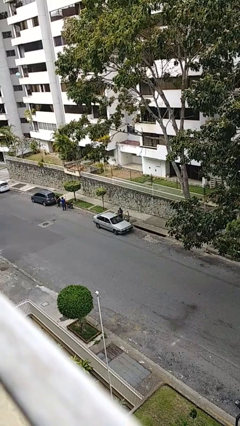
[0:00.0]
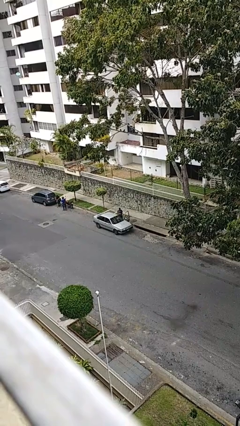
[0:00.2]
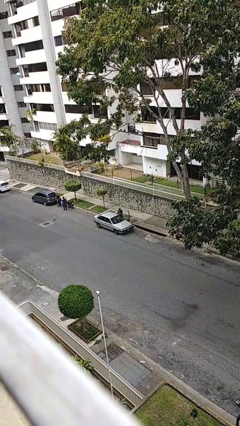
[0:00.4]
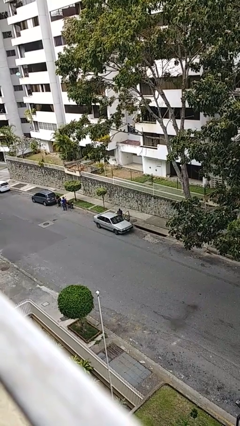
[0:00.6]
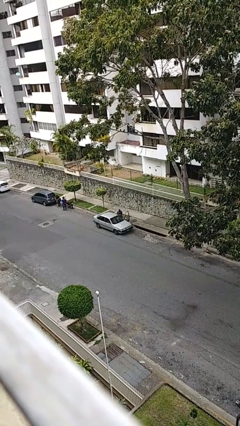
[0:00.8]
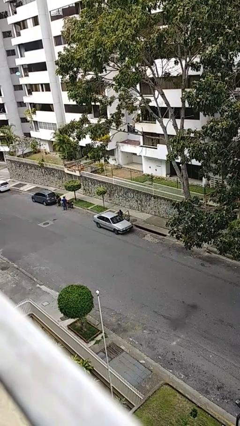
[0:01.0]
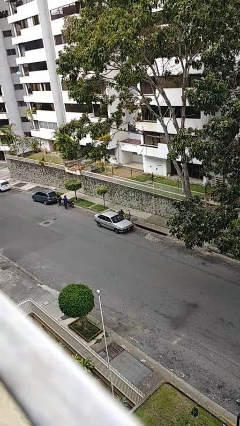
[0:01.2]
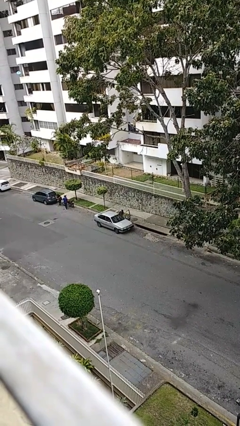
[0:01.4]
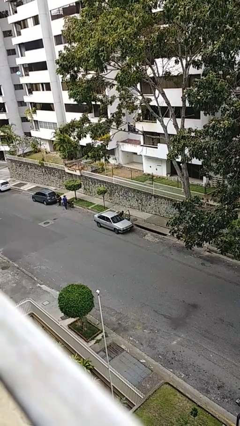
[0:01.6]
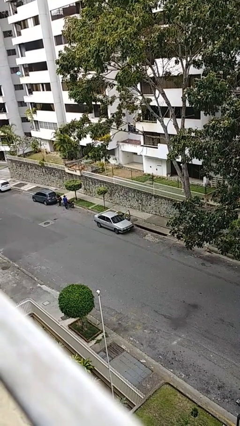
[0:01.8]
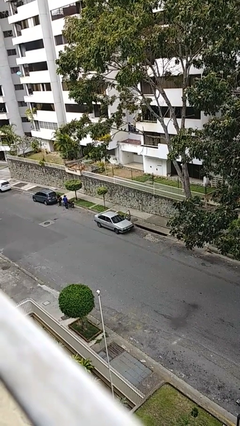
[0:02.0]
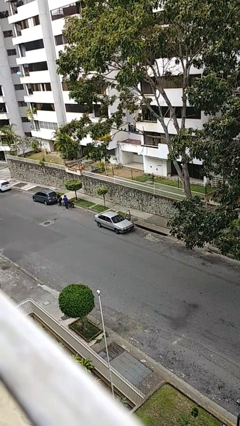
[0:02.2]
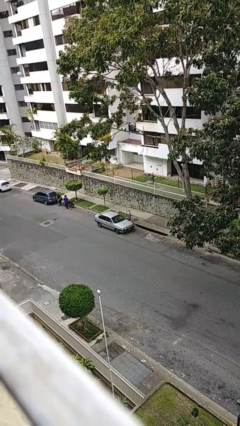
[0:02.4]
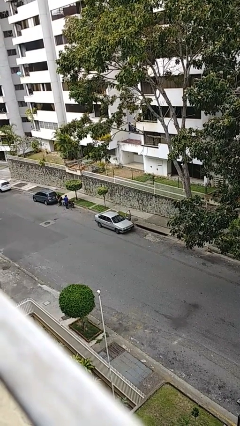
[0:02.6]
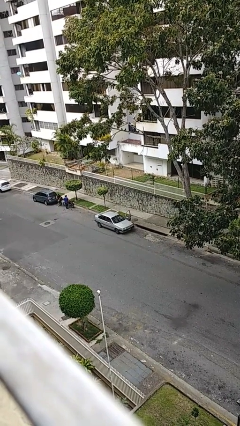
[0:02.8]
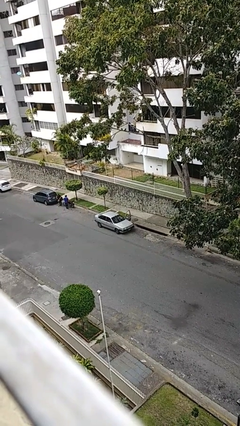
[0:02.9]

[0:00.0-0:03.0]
person enters car

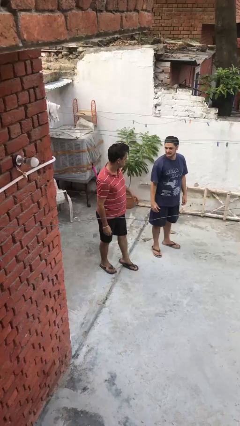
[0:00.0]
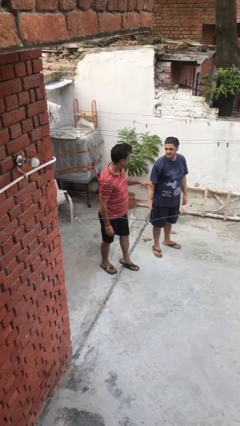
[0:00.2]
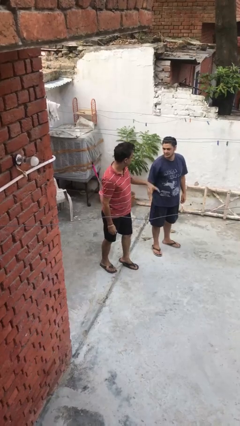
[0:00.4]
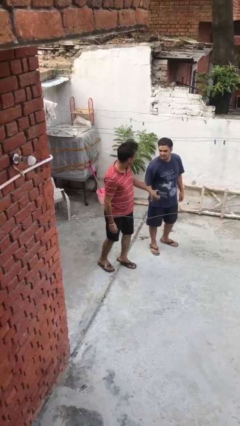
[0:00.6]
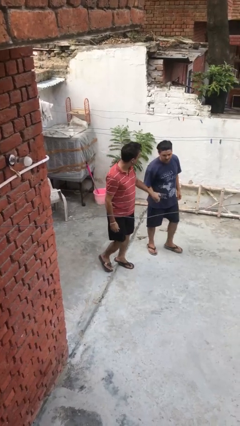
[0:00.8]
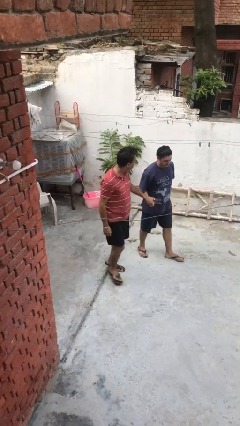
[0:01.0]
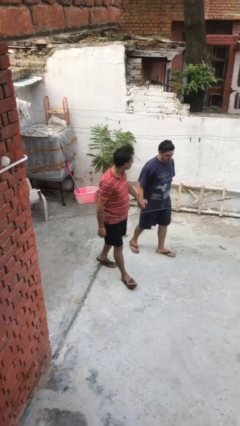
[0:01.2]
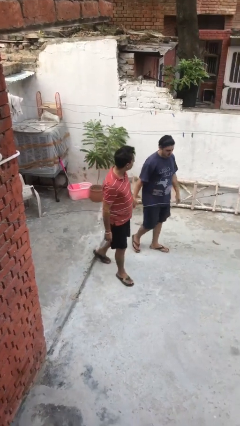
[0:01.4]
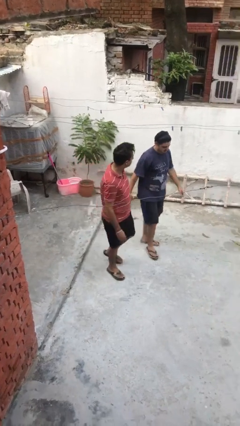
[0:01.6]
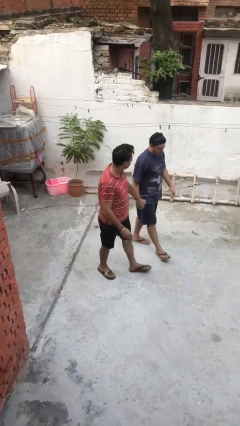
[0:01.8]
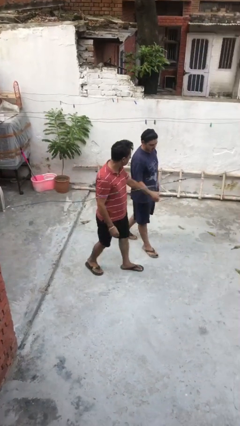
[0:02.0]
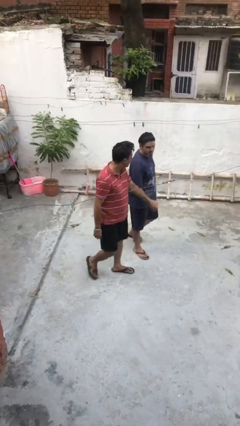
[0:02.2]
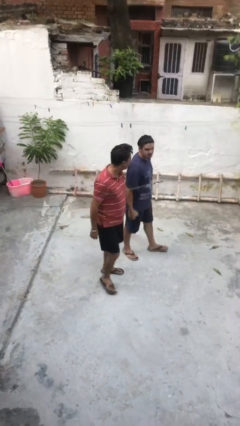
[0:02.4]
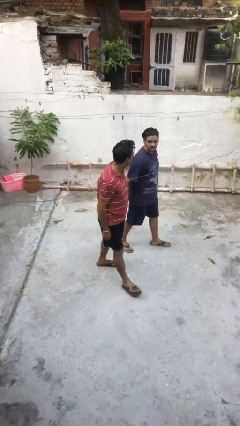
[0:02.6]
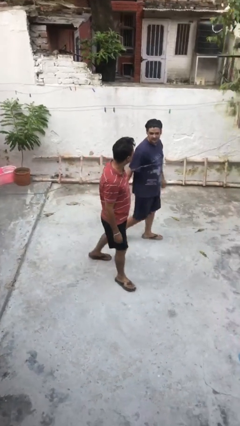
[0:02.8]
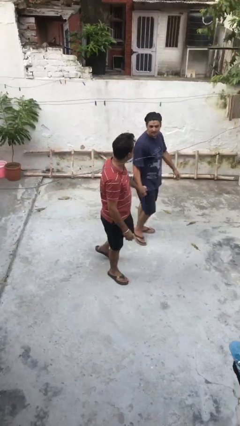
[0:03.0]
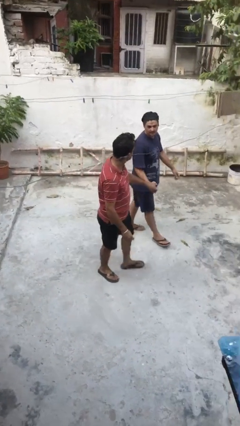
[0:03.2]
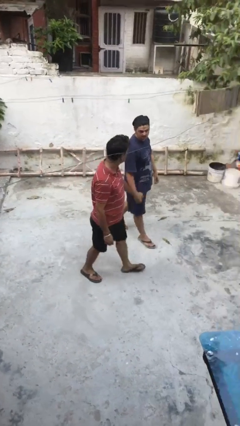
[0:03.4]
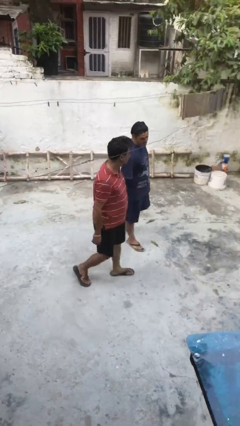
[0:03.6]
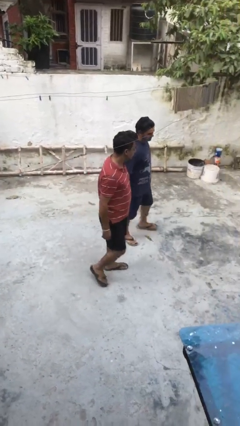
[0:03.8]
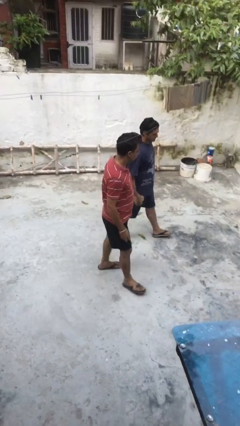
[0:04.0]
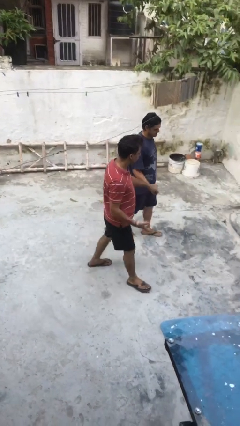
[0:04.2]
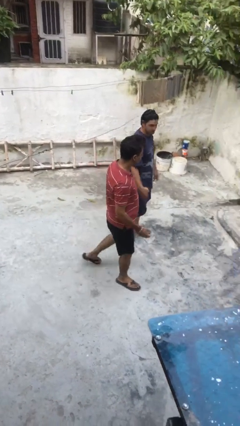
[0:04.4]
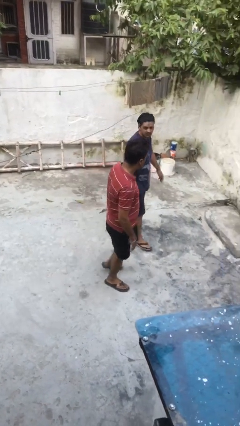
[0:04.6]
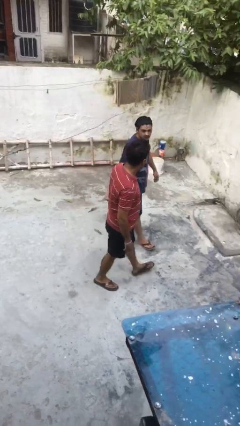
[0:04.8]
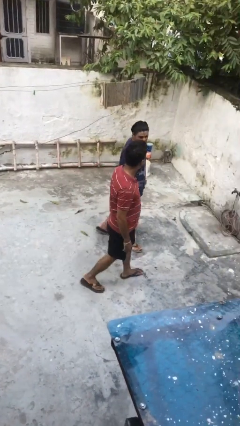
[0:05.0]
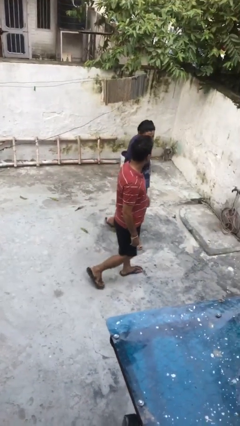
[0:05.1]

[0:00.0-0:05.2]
person holds hand

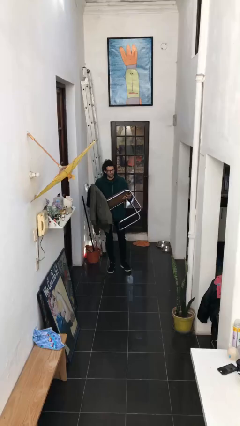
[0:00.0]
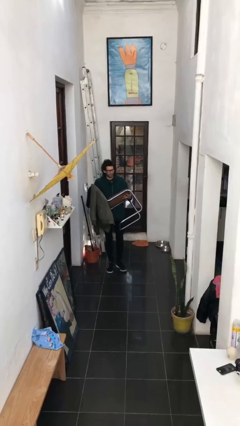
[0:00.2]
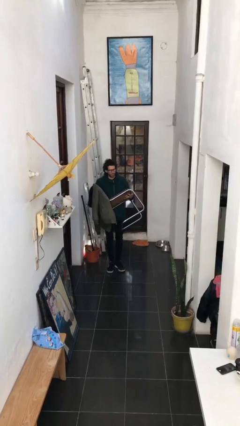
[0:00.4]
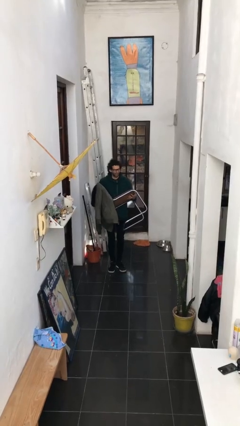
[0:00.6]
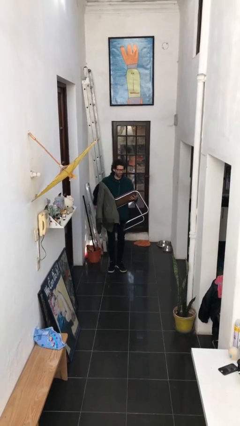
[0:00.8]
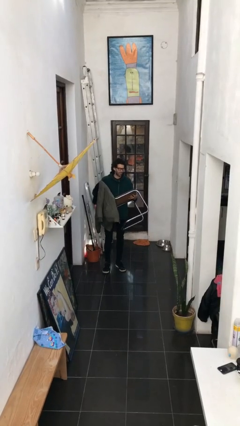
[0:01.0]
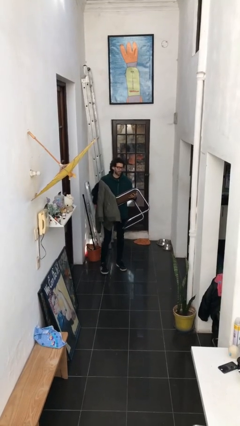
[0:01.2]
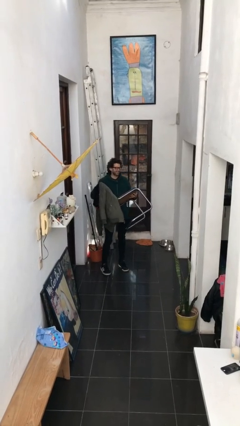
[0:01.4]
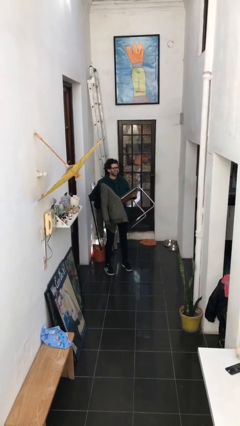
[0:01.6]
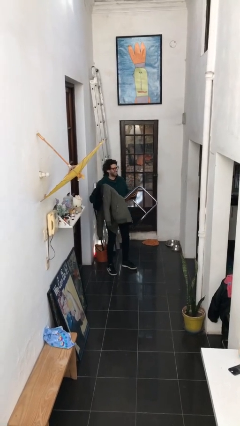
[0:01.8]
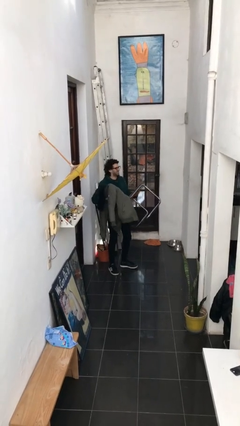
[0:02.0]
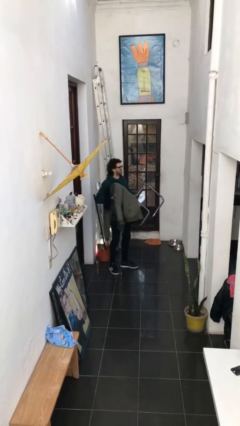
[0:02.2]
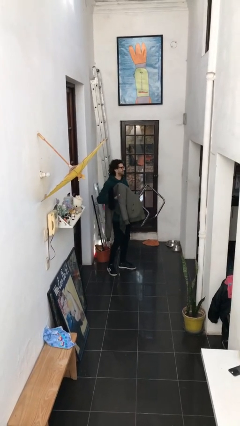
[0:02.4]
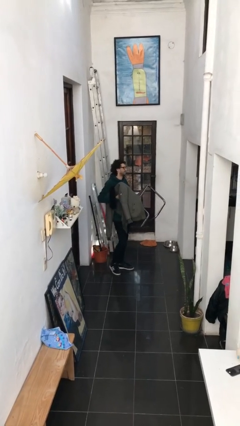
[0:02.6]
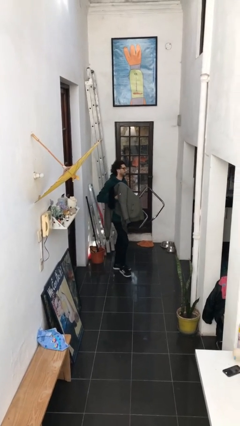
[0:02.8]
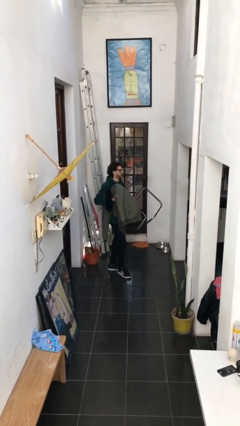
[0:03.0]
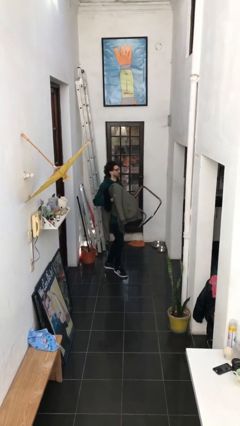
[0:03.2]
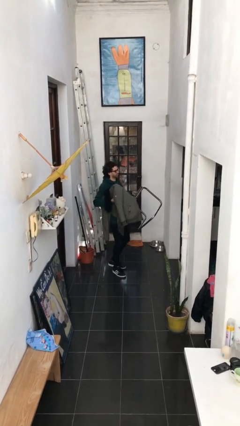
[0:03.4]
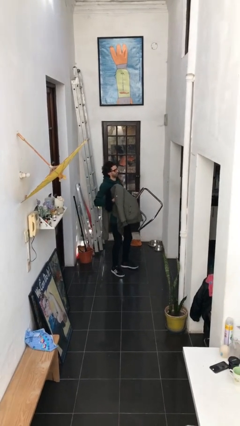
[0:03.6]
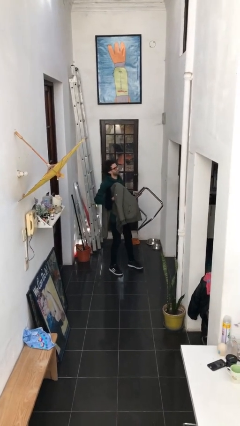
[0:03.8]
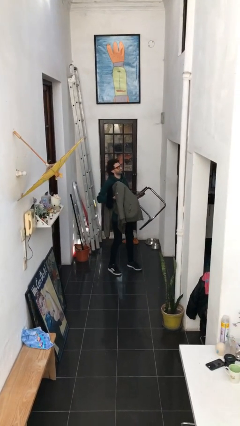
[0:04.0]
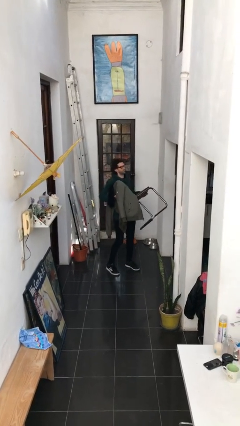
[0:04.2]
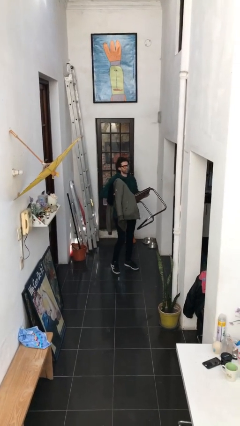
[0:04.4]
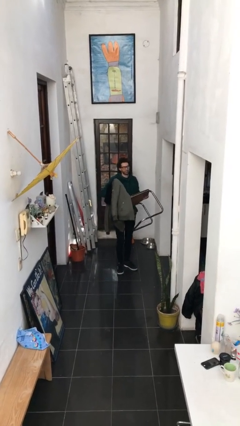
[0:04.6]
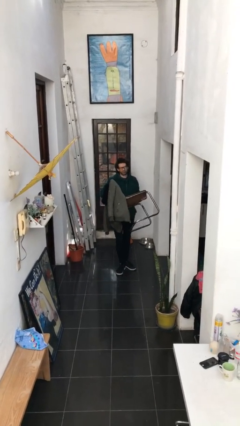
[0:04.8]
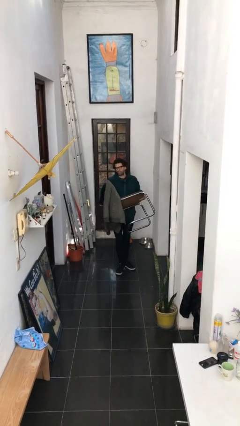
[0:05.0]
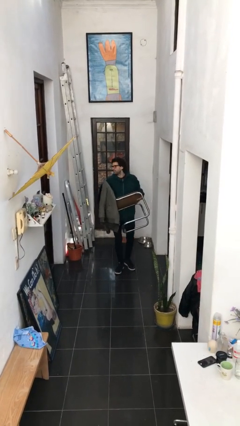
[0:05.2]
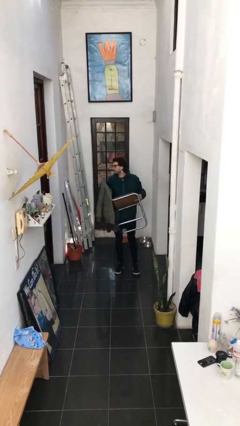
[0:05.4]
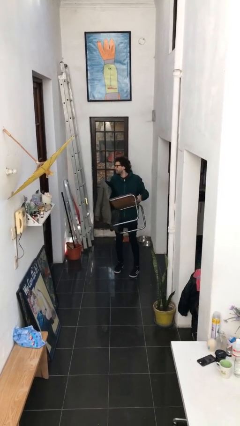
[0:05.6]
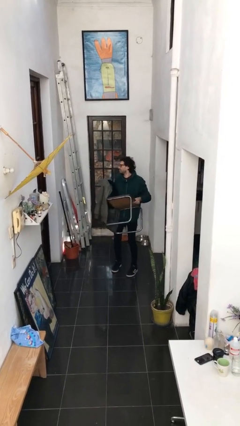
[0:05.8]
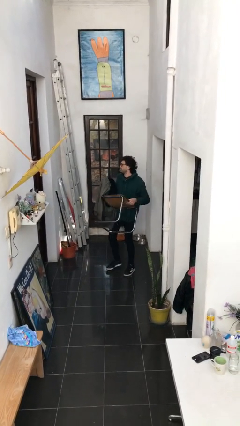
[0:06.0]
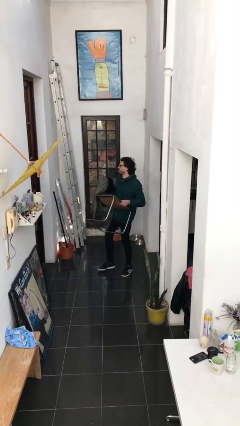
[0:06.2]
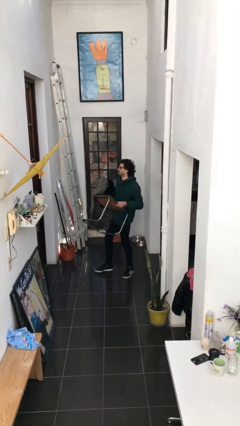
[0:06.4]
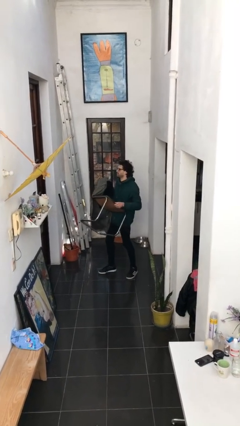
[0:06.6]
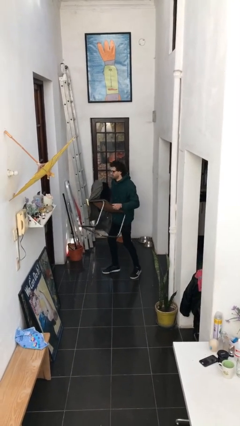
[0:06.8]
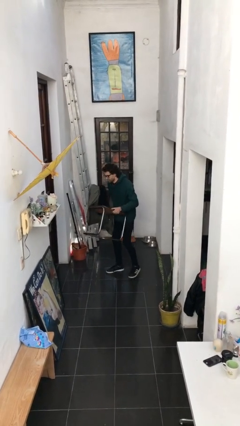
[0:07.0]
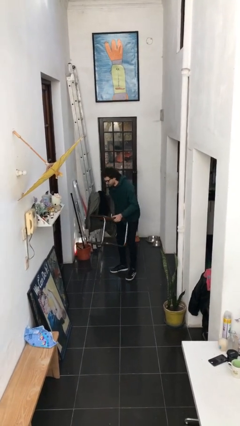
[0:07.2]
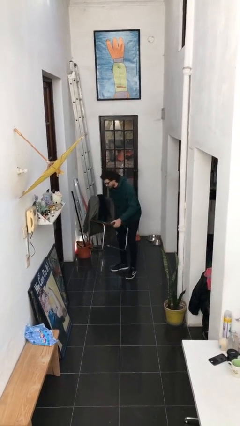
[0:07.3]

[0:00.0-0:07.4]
person carries heavy object

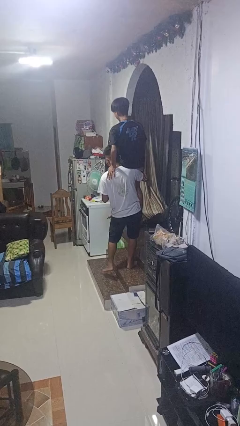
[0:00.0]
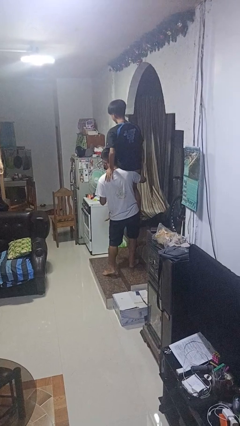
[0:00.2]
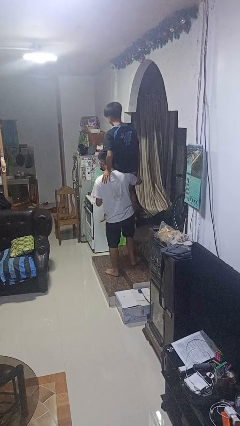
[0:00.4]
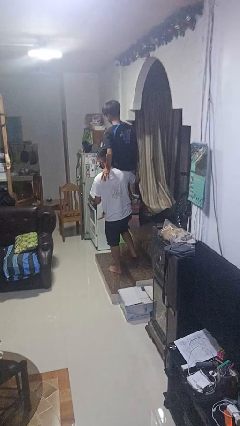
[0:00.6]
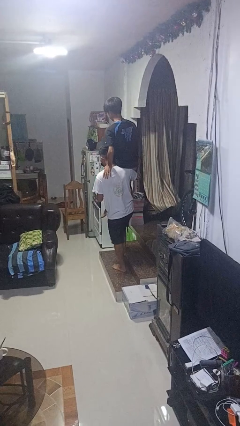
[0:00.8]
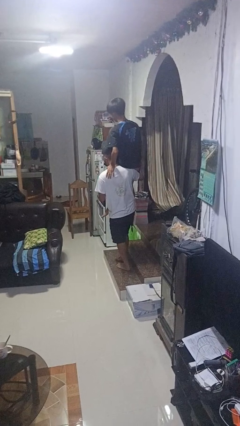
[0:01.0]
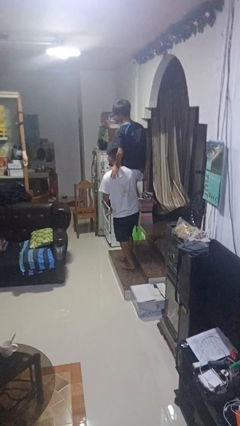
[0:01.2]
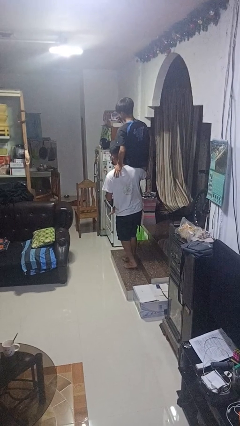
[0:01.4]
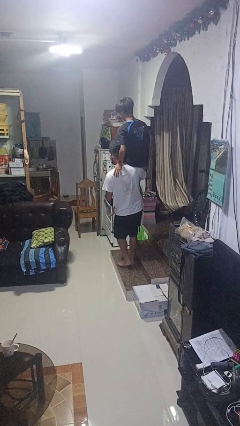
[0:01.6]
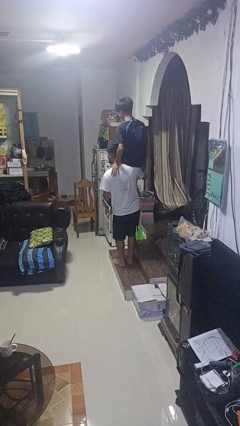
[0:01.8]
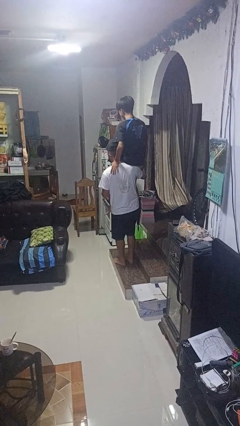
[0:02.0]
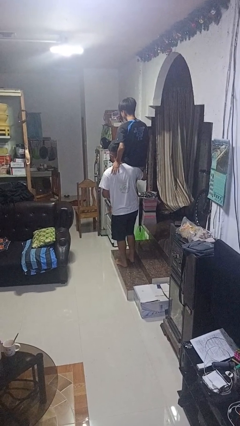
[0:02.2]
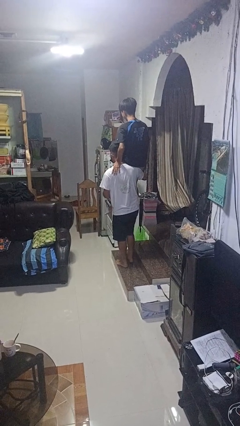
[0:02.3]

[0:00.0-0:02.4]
person carries person on shoulders
